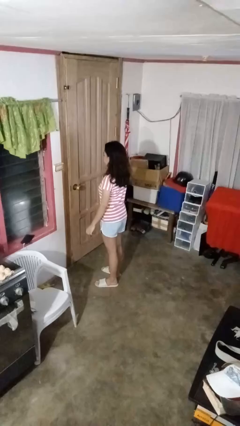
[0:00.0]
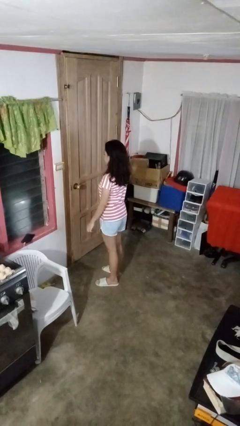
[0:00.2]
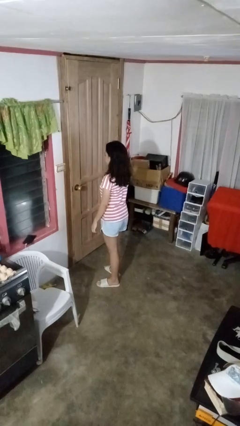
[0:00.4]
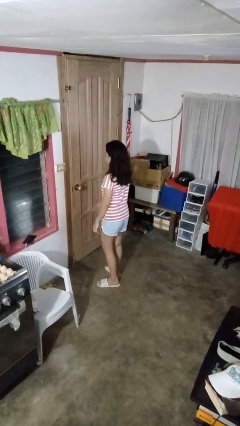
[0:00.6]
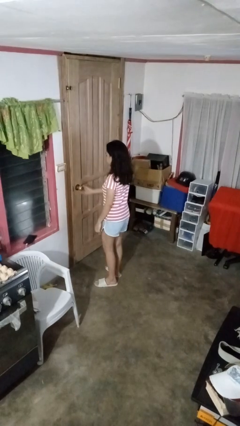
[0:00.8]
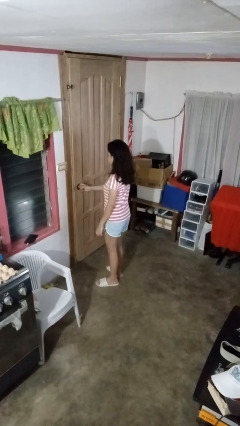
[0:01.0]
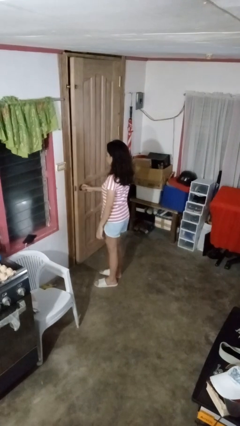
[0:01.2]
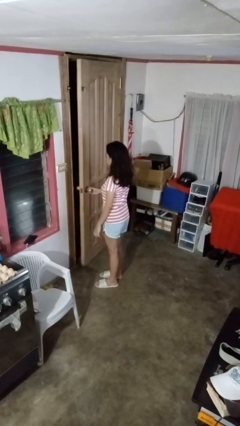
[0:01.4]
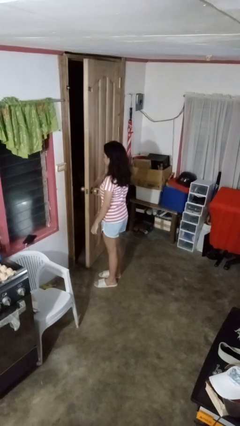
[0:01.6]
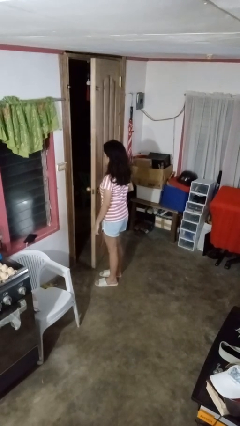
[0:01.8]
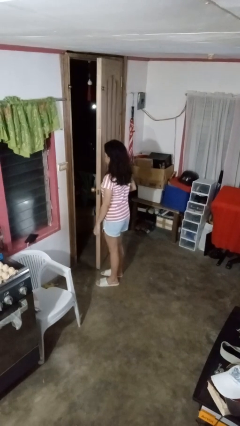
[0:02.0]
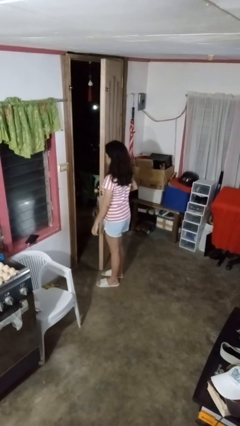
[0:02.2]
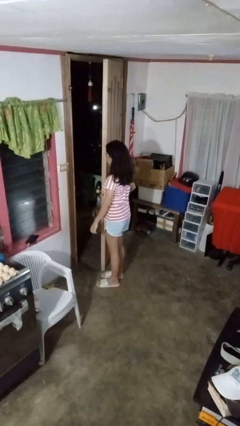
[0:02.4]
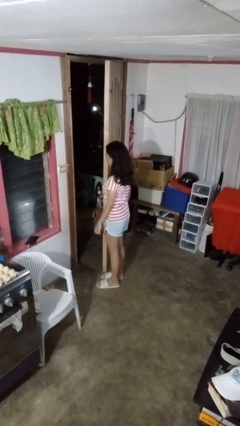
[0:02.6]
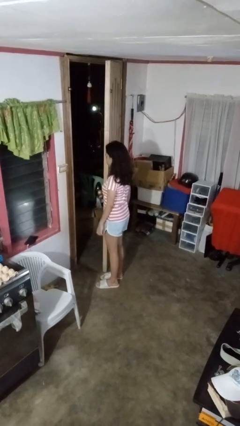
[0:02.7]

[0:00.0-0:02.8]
person opens facility door

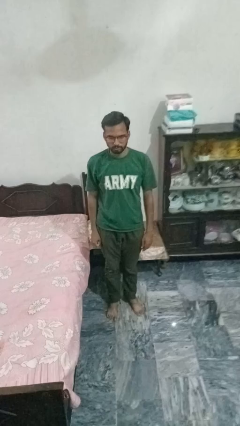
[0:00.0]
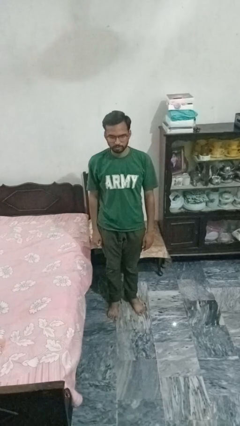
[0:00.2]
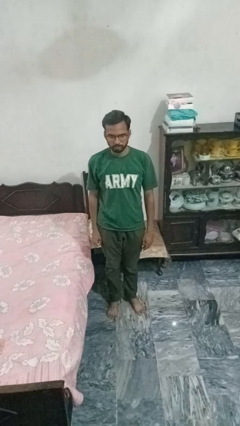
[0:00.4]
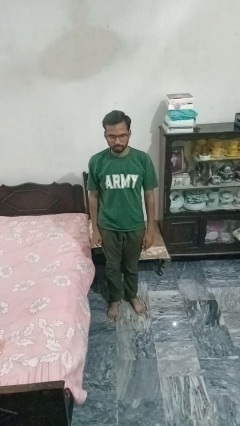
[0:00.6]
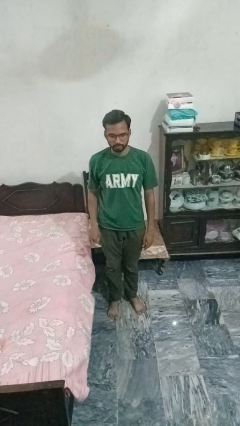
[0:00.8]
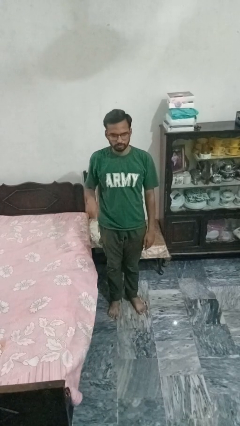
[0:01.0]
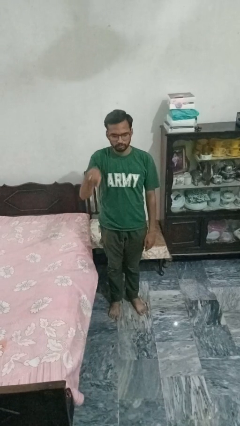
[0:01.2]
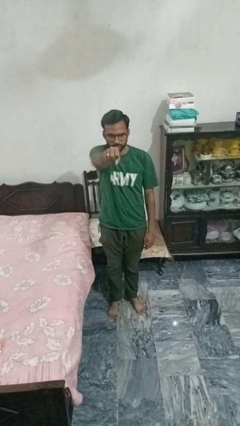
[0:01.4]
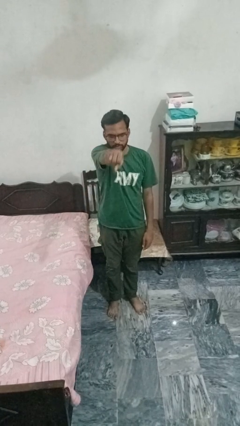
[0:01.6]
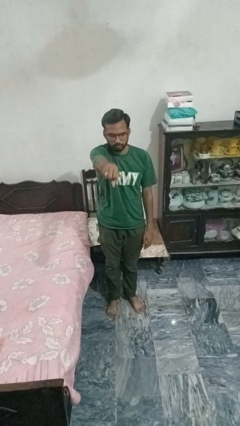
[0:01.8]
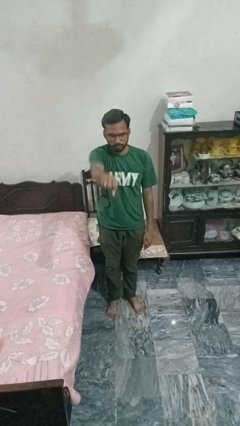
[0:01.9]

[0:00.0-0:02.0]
person punches

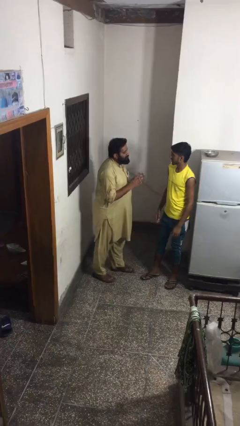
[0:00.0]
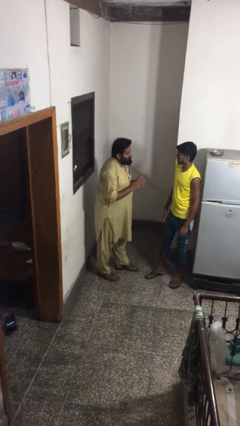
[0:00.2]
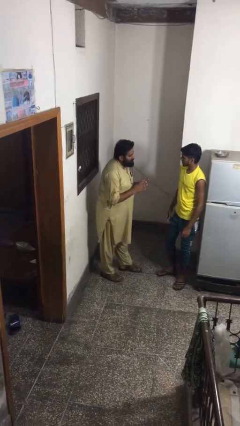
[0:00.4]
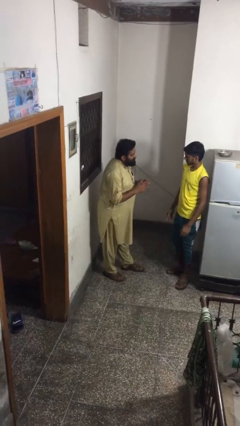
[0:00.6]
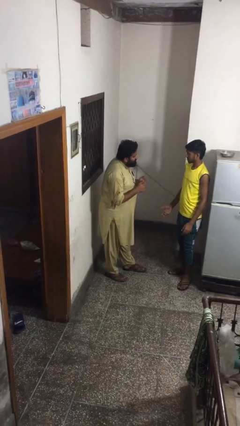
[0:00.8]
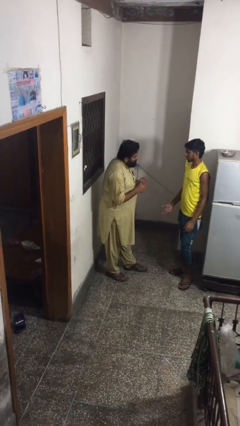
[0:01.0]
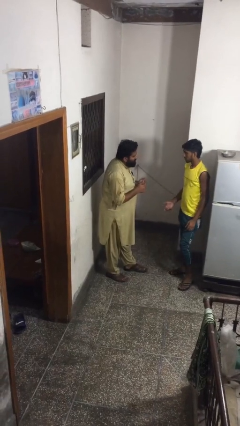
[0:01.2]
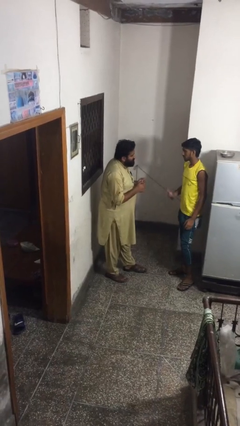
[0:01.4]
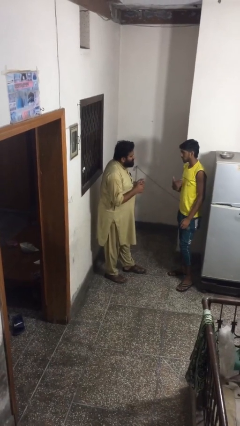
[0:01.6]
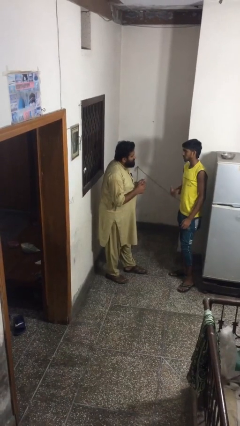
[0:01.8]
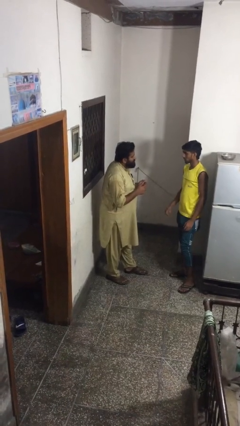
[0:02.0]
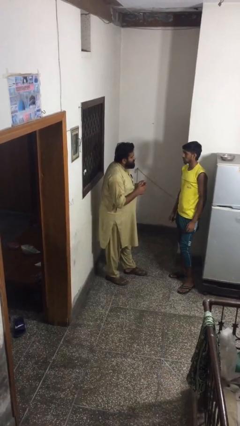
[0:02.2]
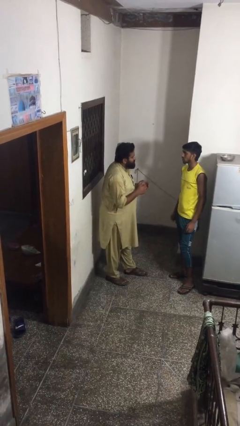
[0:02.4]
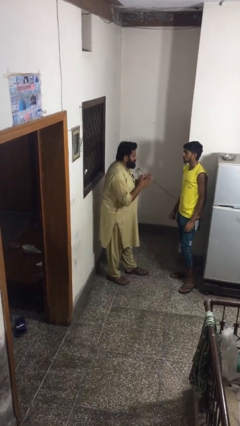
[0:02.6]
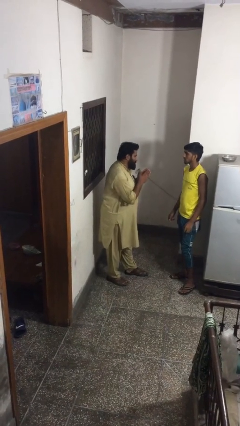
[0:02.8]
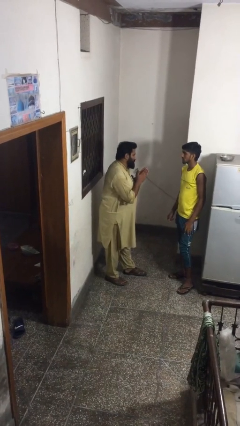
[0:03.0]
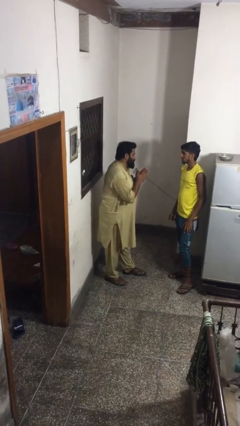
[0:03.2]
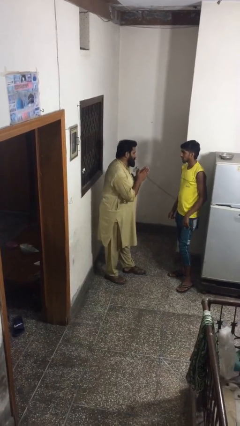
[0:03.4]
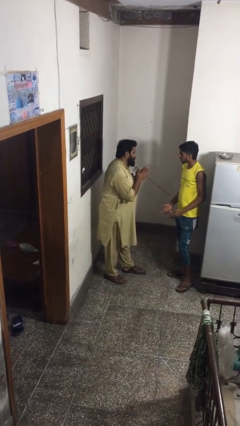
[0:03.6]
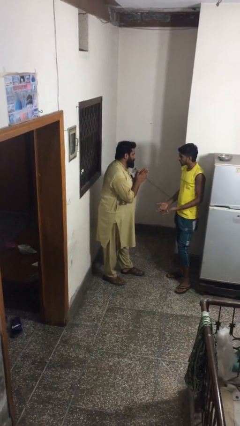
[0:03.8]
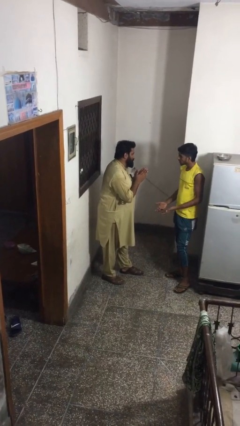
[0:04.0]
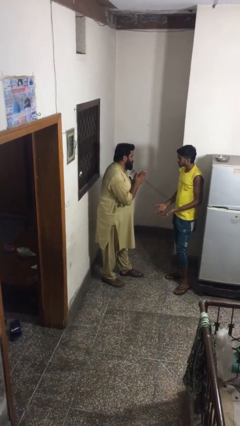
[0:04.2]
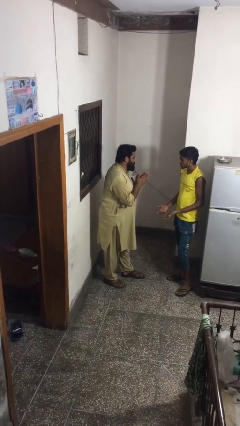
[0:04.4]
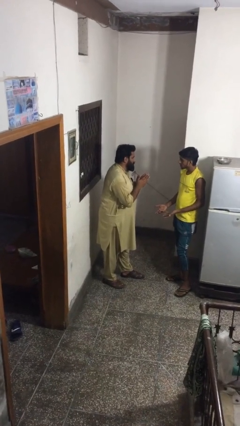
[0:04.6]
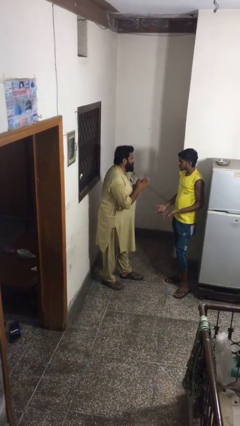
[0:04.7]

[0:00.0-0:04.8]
person talks to person

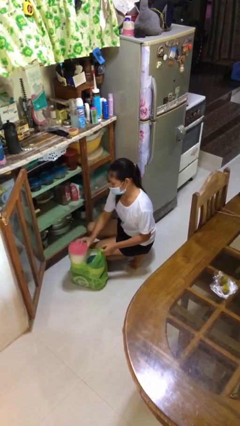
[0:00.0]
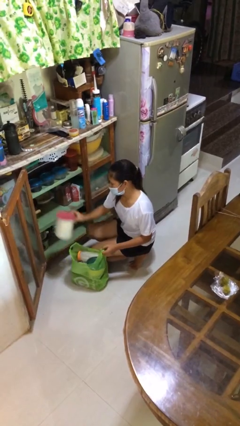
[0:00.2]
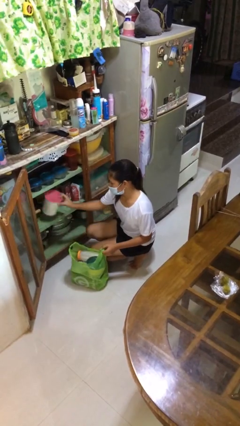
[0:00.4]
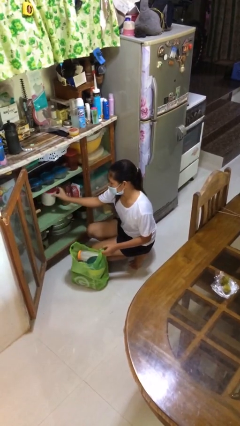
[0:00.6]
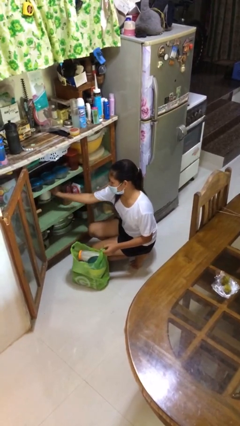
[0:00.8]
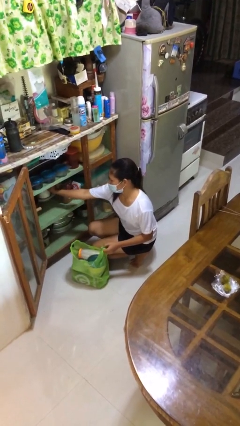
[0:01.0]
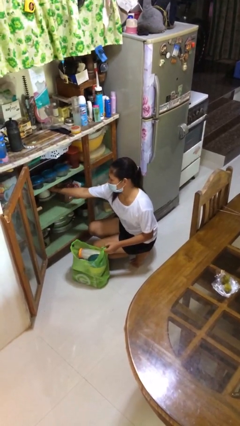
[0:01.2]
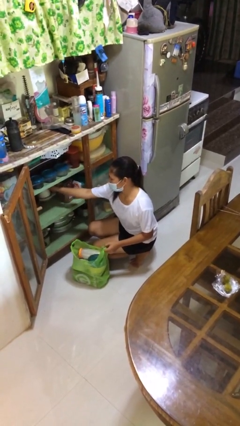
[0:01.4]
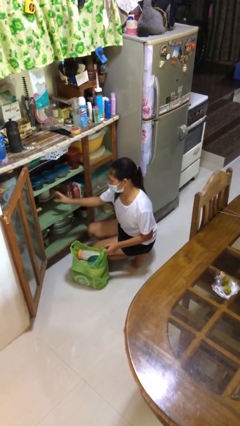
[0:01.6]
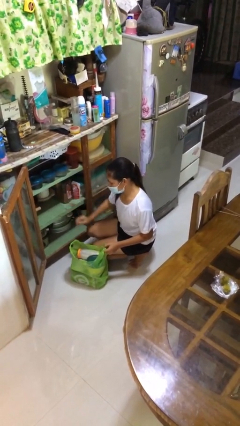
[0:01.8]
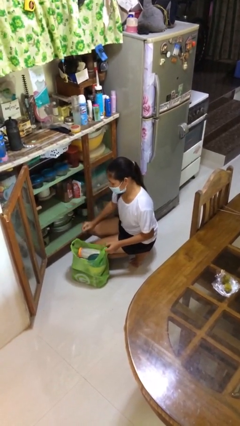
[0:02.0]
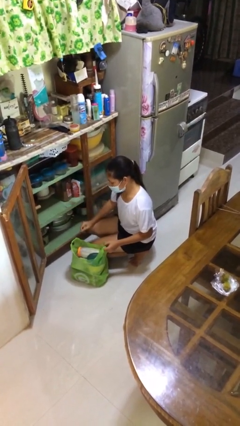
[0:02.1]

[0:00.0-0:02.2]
person loads groceries into cabinet

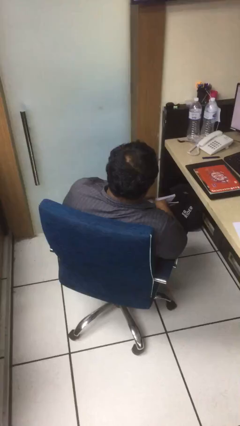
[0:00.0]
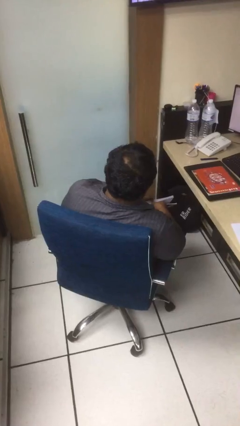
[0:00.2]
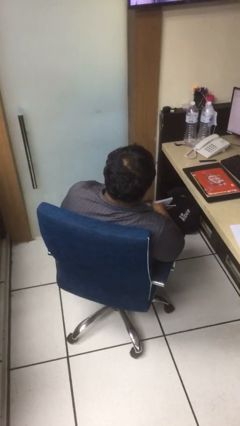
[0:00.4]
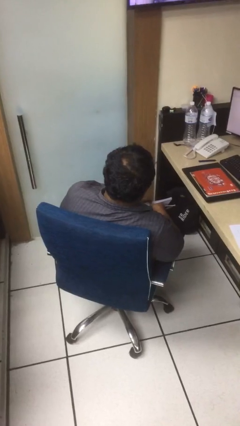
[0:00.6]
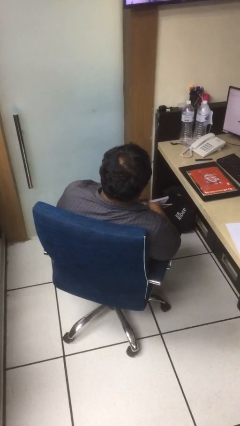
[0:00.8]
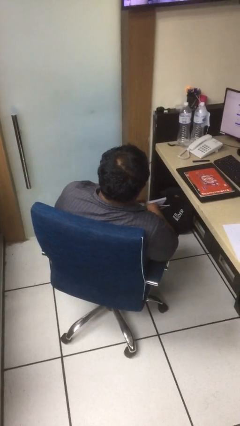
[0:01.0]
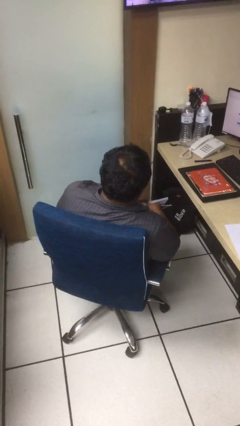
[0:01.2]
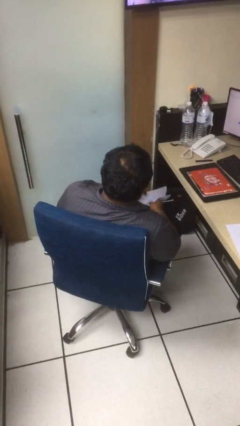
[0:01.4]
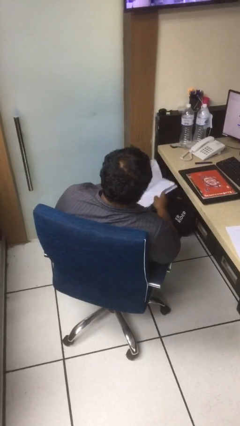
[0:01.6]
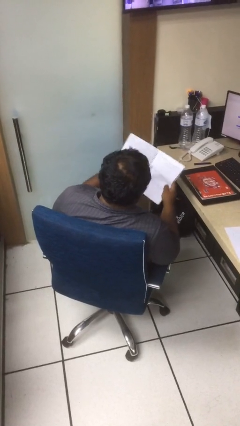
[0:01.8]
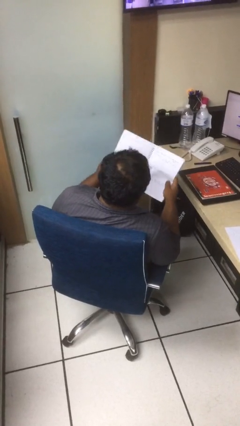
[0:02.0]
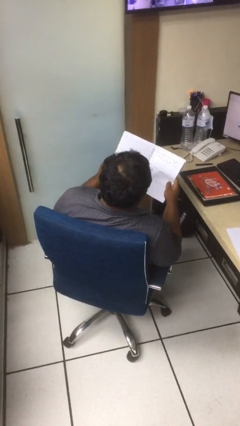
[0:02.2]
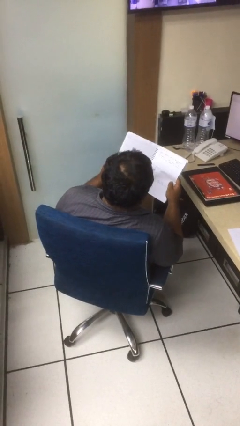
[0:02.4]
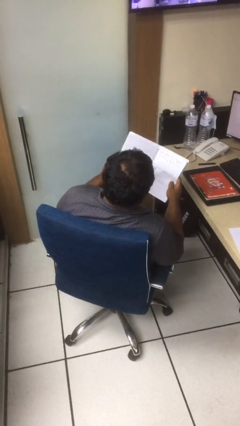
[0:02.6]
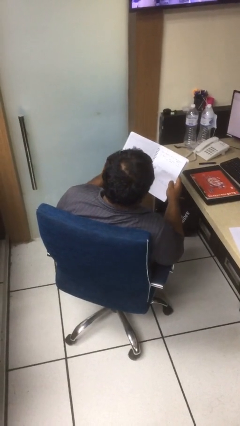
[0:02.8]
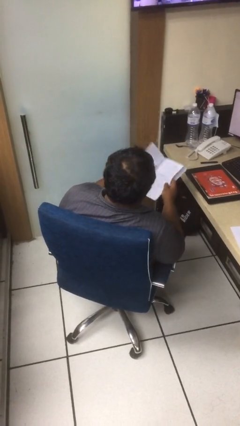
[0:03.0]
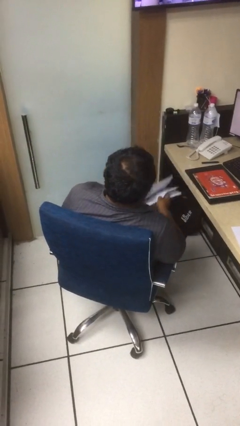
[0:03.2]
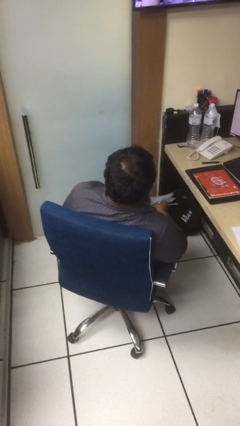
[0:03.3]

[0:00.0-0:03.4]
person reads book

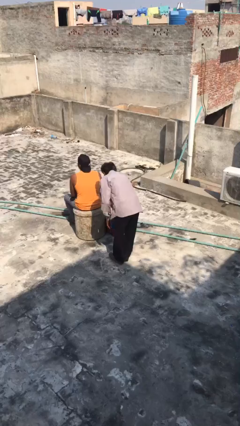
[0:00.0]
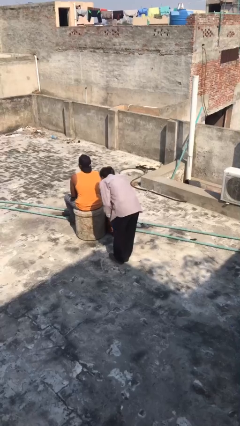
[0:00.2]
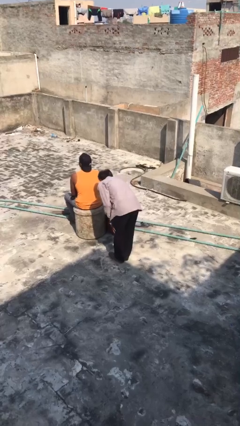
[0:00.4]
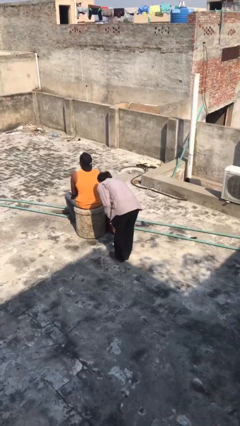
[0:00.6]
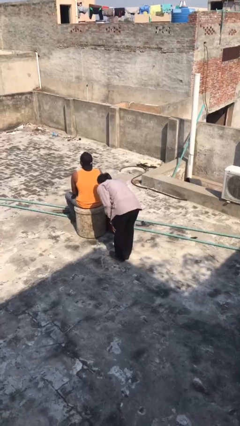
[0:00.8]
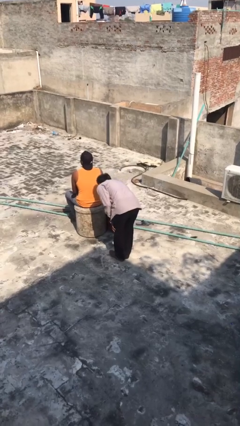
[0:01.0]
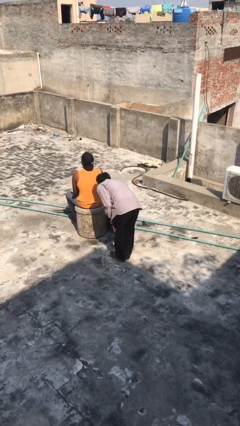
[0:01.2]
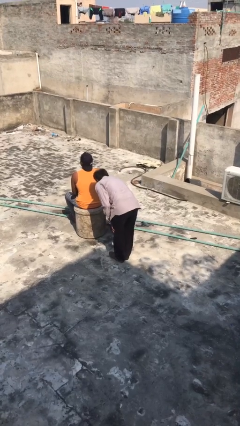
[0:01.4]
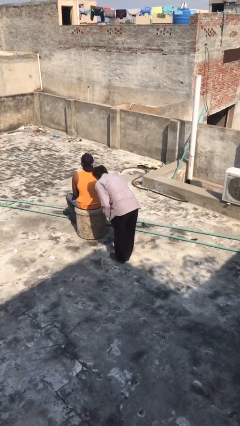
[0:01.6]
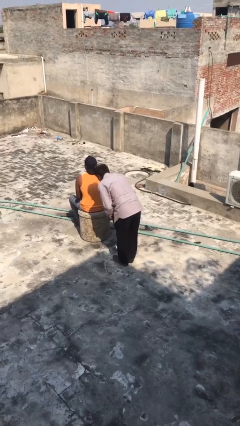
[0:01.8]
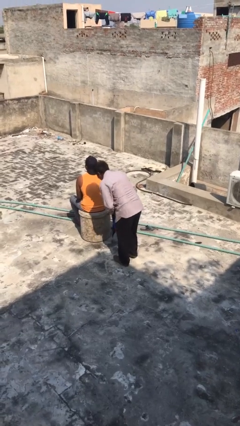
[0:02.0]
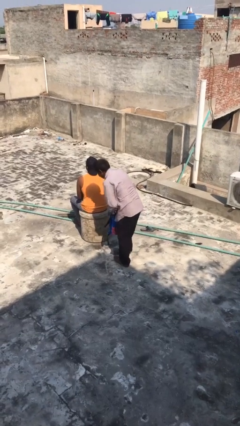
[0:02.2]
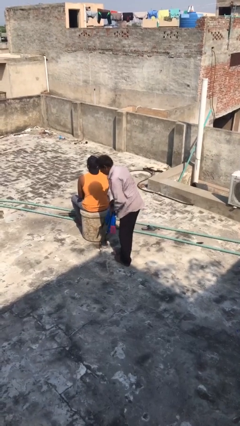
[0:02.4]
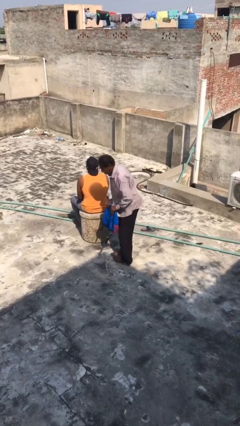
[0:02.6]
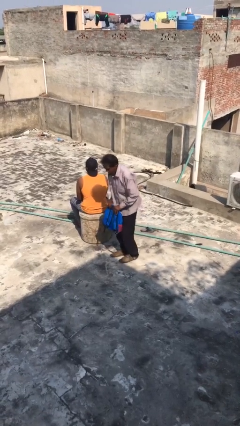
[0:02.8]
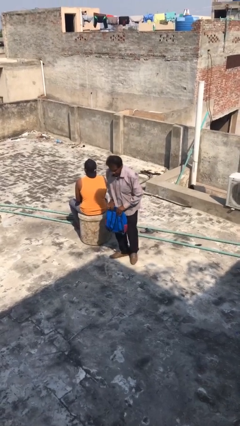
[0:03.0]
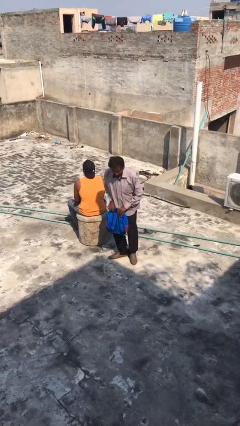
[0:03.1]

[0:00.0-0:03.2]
person steals object from person
